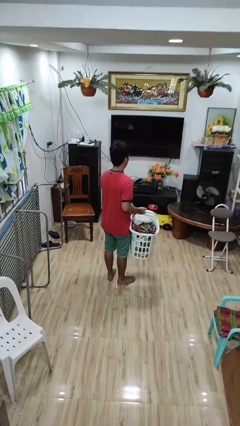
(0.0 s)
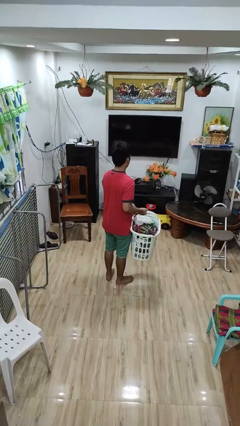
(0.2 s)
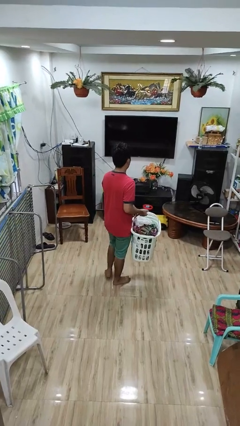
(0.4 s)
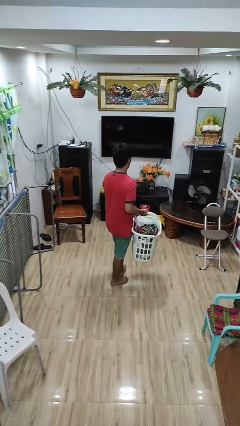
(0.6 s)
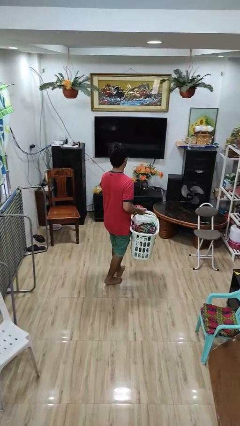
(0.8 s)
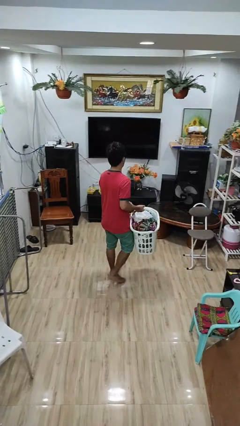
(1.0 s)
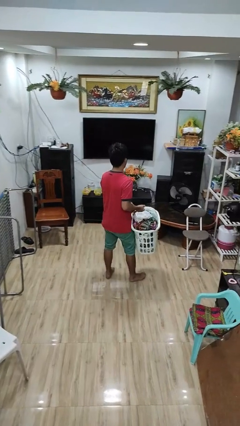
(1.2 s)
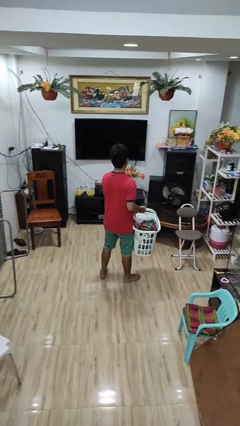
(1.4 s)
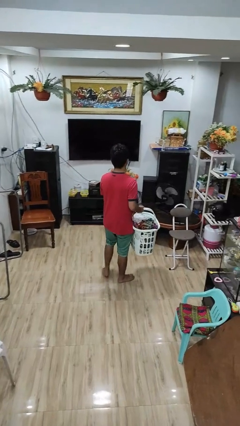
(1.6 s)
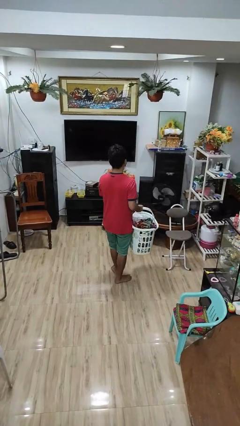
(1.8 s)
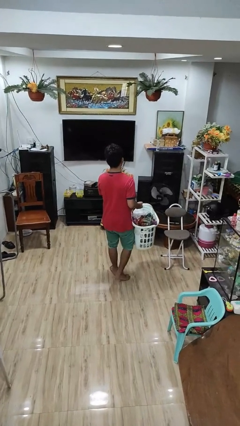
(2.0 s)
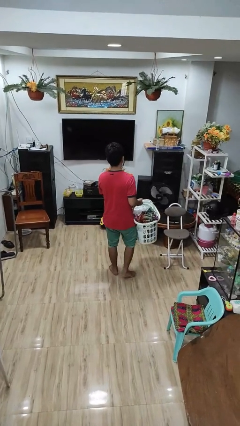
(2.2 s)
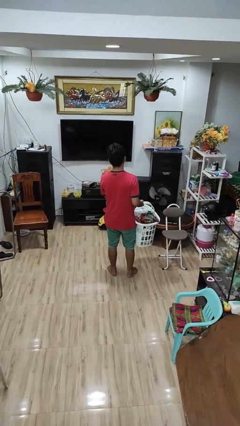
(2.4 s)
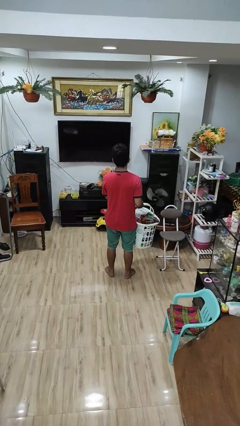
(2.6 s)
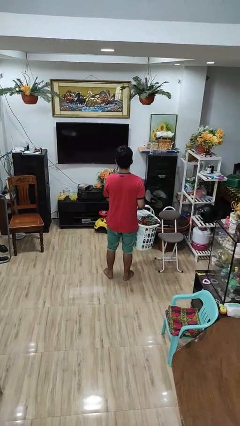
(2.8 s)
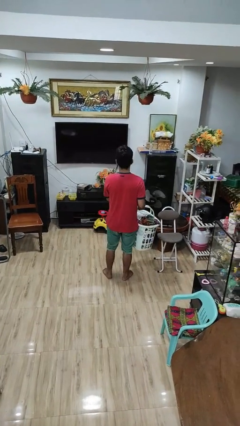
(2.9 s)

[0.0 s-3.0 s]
person carries laundry basket

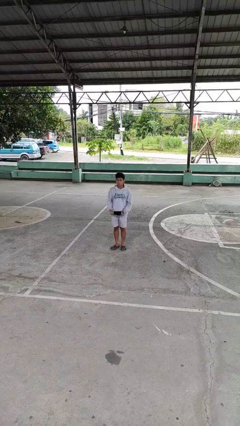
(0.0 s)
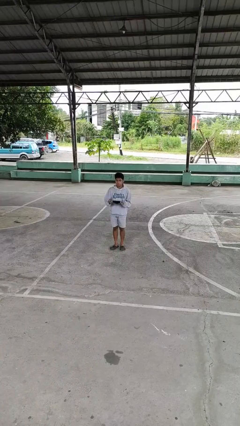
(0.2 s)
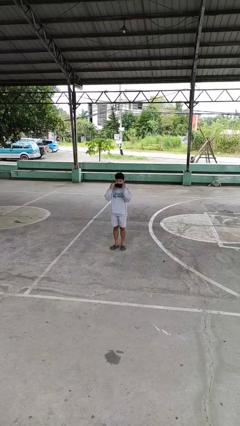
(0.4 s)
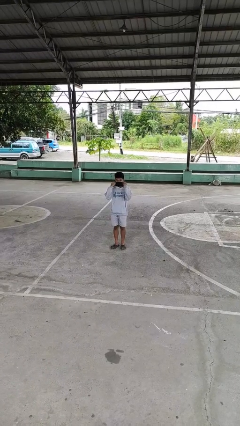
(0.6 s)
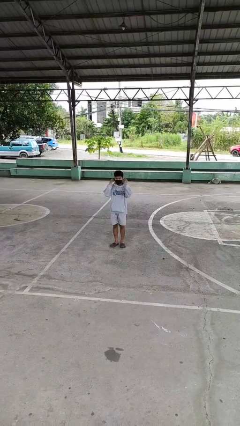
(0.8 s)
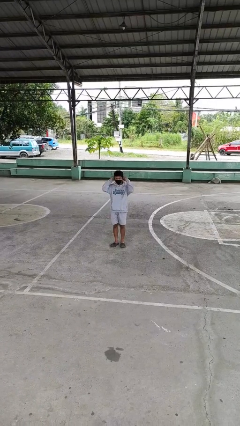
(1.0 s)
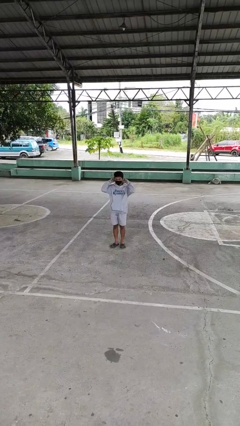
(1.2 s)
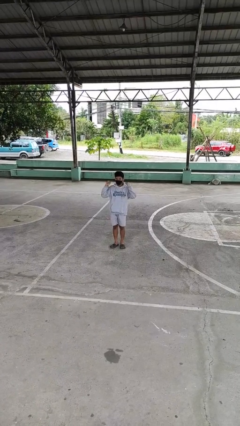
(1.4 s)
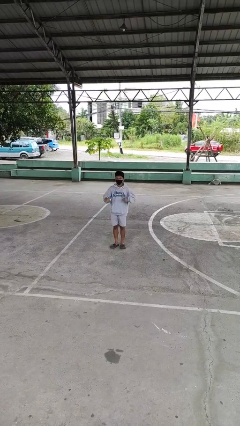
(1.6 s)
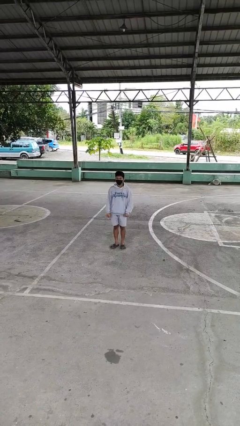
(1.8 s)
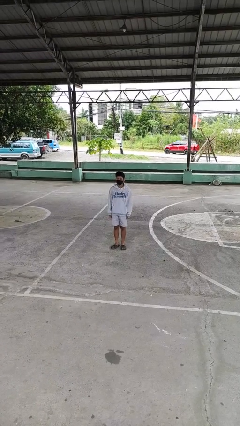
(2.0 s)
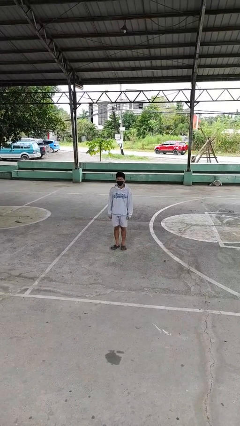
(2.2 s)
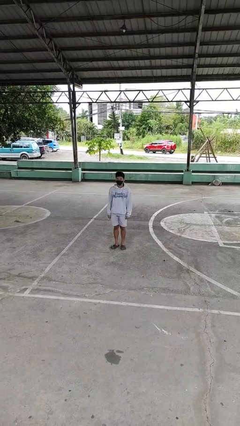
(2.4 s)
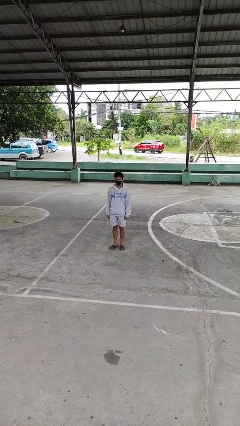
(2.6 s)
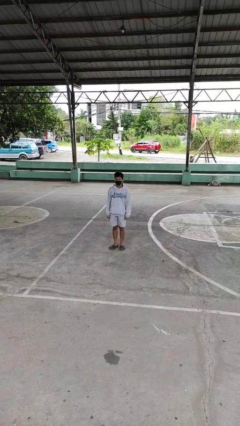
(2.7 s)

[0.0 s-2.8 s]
person puts on facemask

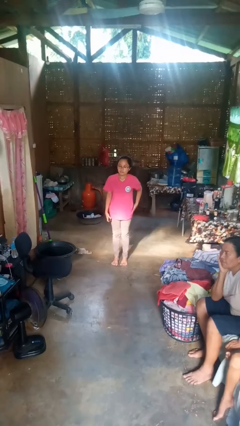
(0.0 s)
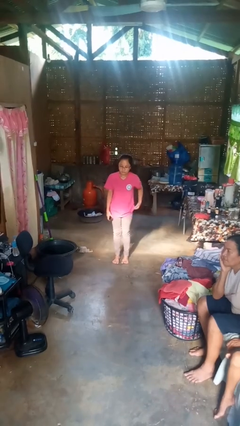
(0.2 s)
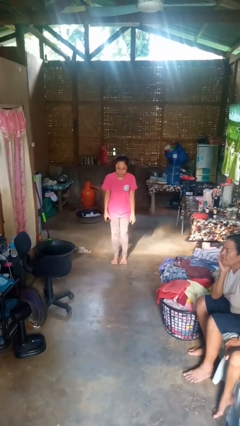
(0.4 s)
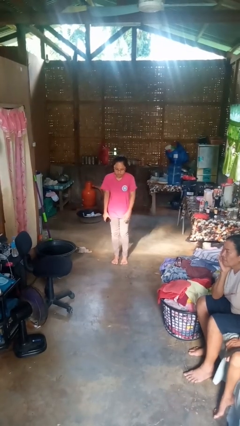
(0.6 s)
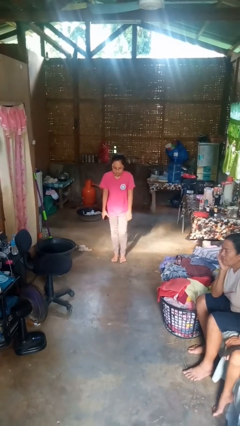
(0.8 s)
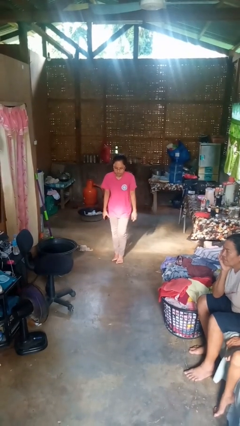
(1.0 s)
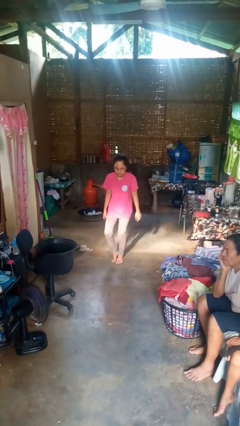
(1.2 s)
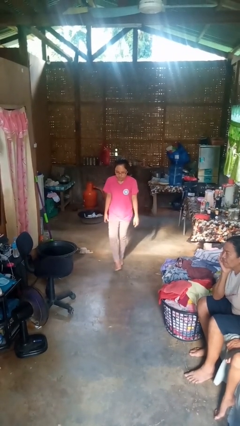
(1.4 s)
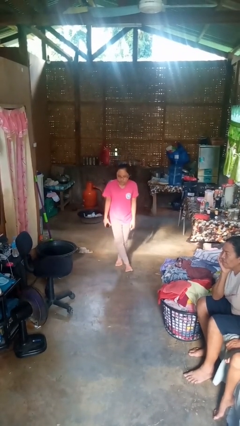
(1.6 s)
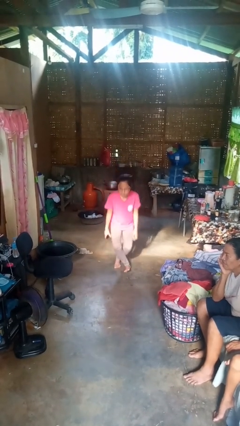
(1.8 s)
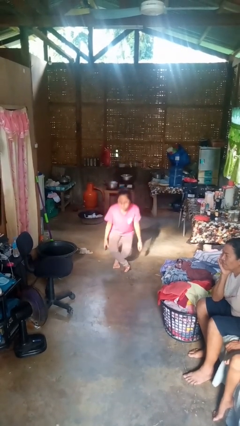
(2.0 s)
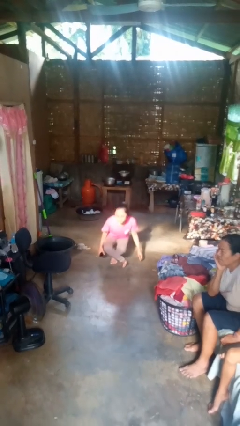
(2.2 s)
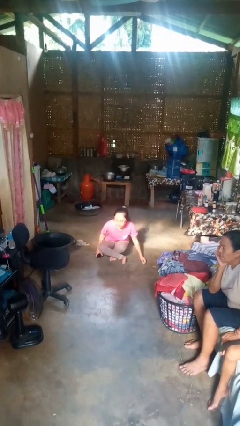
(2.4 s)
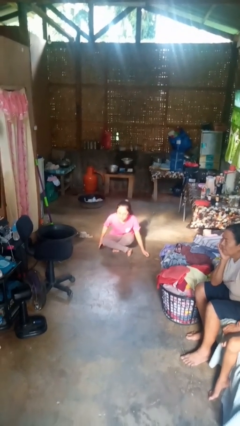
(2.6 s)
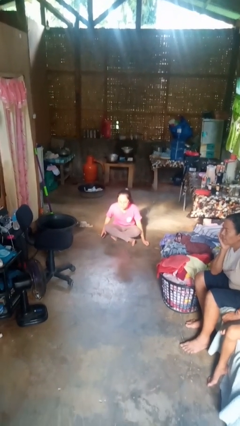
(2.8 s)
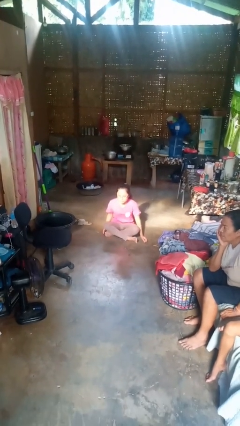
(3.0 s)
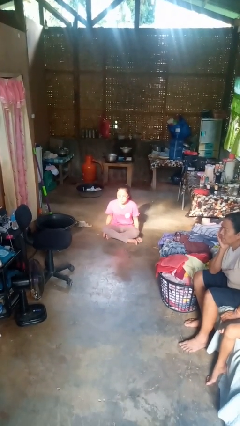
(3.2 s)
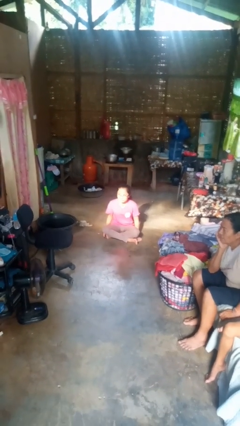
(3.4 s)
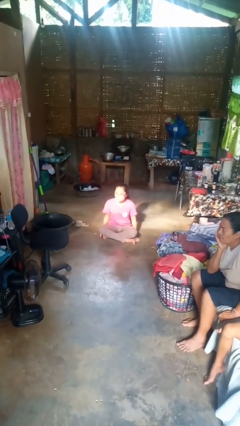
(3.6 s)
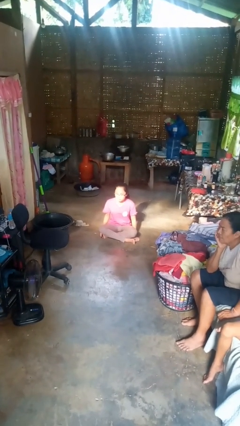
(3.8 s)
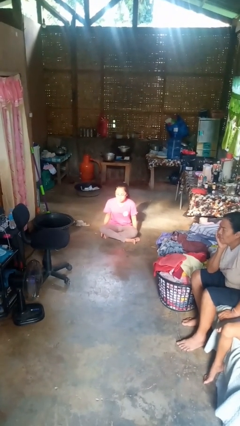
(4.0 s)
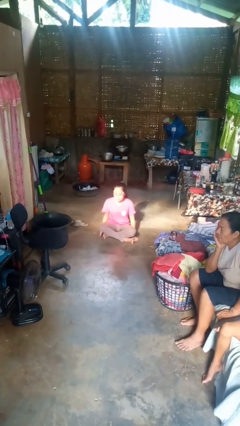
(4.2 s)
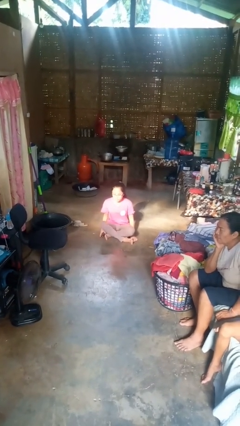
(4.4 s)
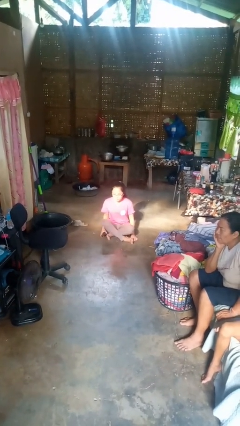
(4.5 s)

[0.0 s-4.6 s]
person sits crisscross

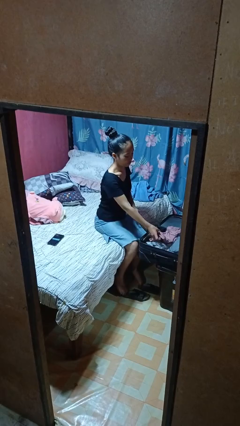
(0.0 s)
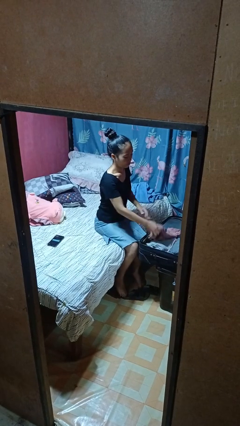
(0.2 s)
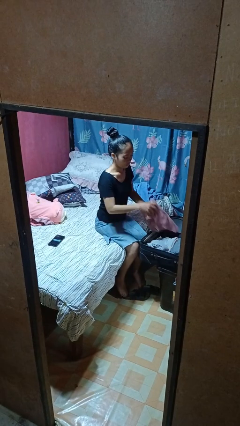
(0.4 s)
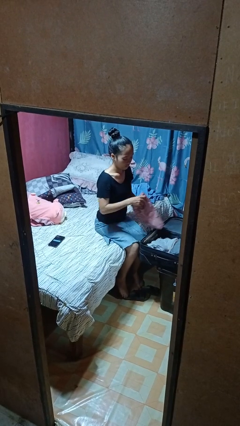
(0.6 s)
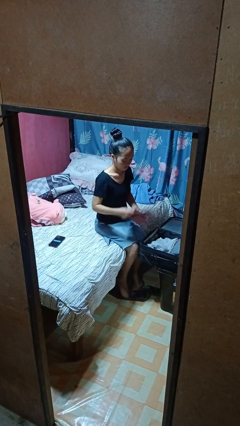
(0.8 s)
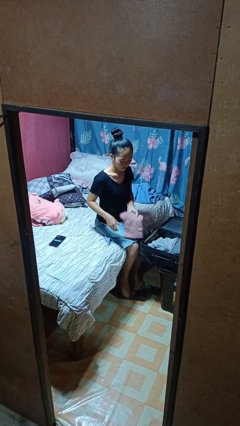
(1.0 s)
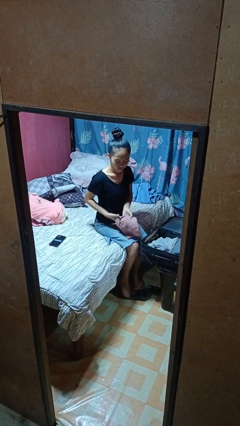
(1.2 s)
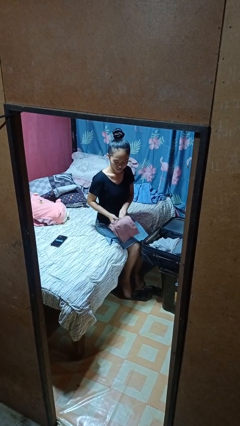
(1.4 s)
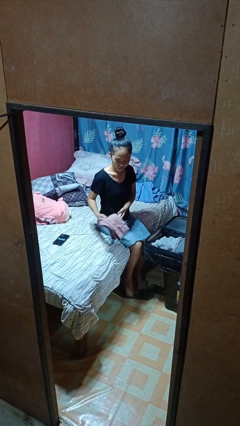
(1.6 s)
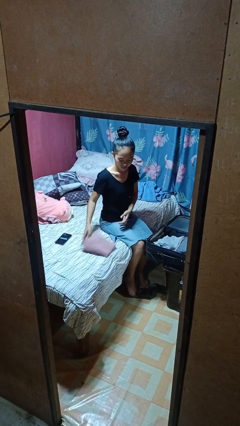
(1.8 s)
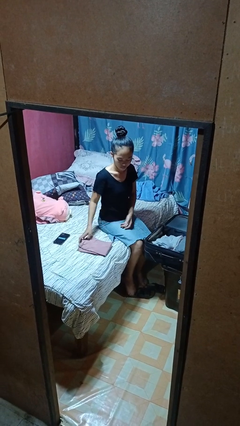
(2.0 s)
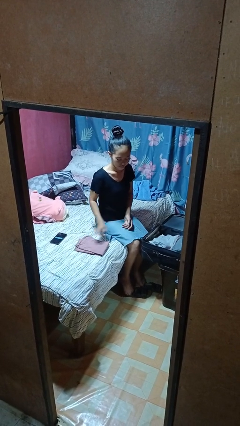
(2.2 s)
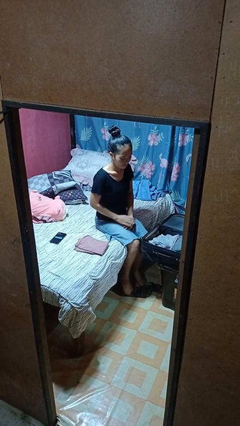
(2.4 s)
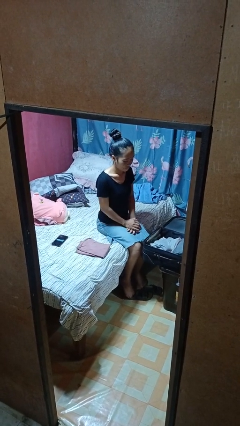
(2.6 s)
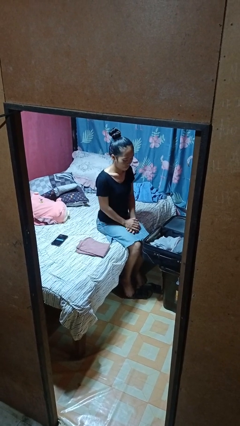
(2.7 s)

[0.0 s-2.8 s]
person unloads clothes from suitcase

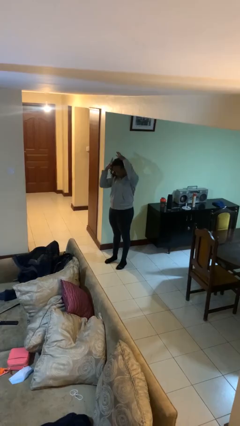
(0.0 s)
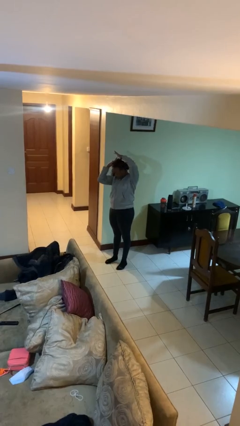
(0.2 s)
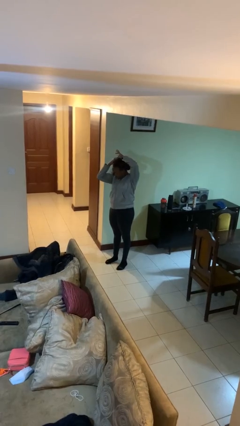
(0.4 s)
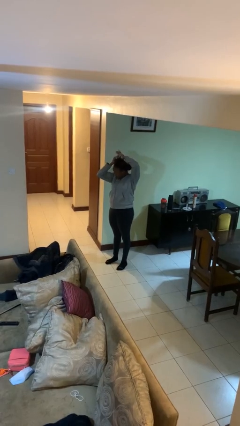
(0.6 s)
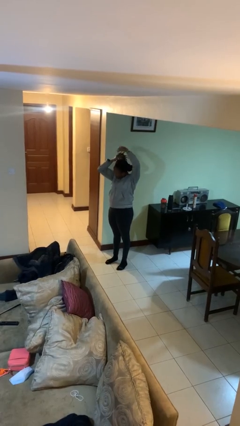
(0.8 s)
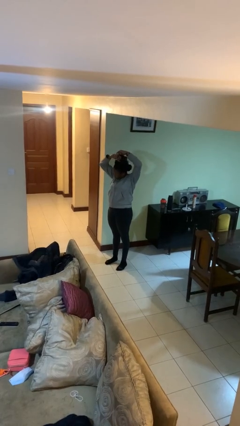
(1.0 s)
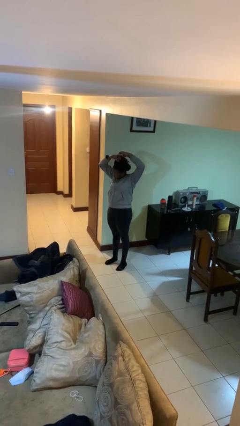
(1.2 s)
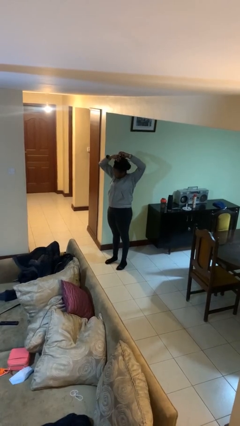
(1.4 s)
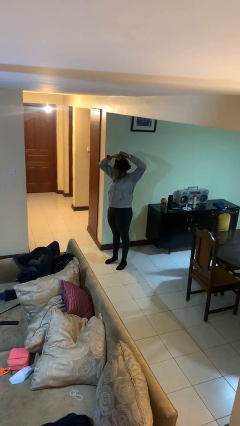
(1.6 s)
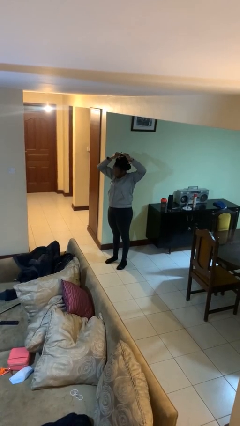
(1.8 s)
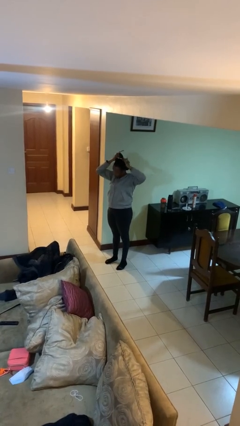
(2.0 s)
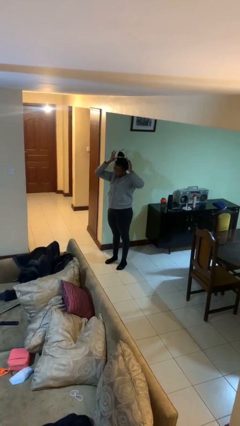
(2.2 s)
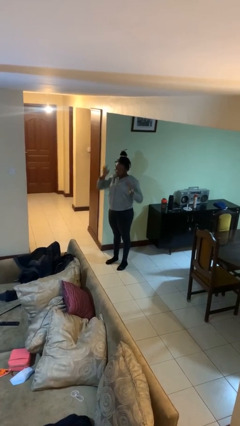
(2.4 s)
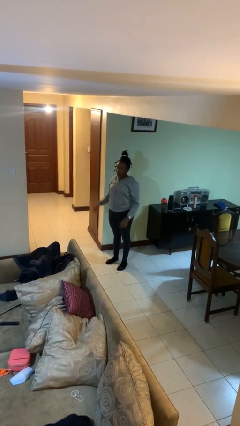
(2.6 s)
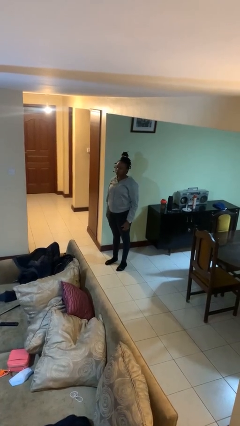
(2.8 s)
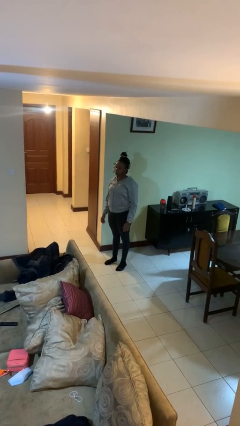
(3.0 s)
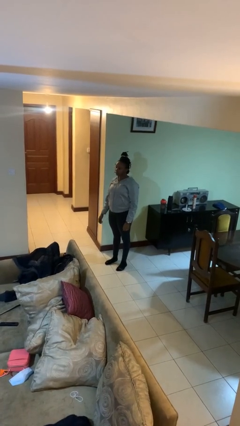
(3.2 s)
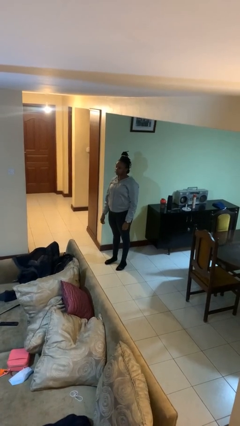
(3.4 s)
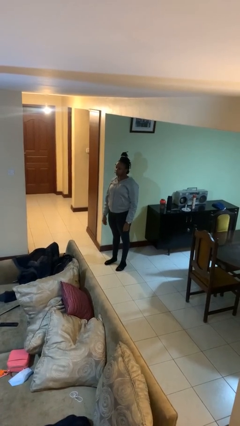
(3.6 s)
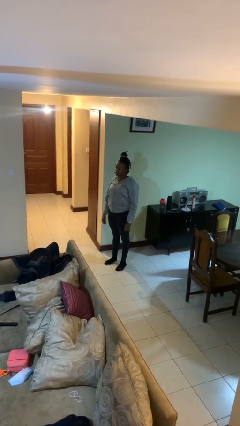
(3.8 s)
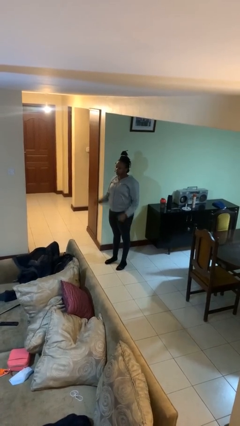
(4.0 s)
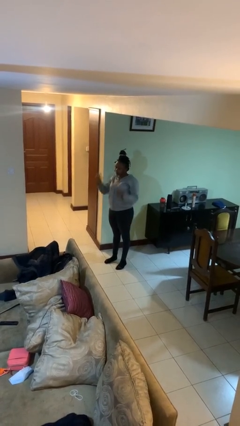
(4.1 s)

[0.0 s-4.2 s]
person puts hair in ponytail
